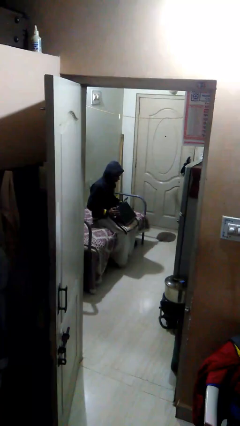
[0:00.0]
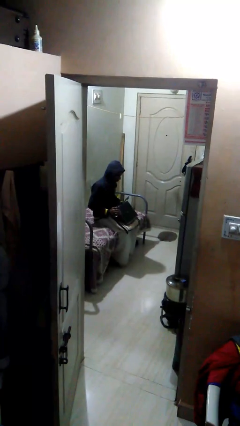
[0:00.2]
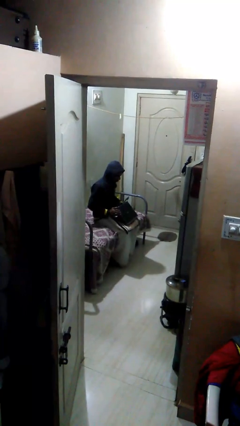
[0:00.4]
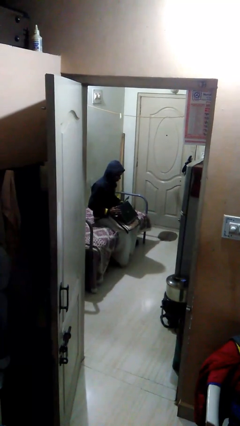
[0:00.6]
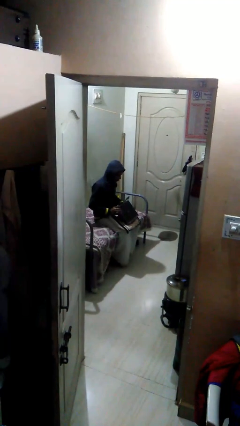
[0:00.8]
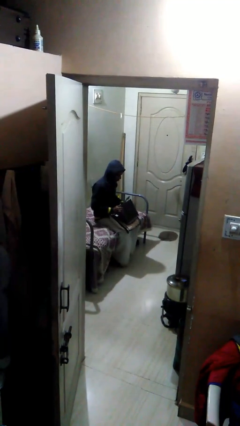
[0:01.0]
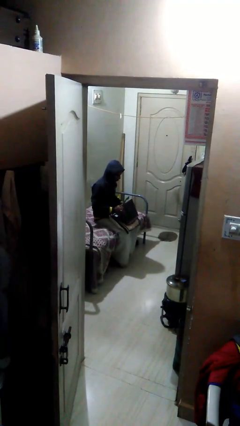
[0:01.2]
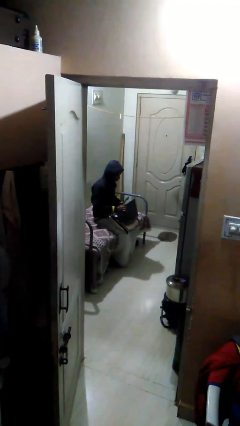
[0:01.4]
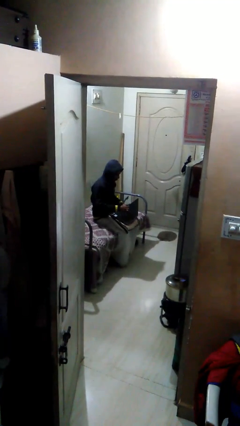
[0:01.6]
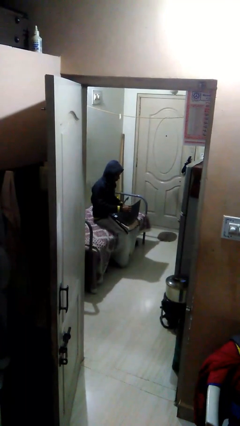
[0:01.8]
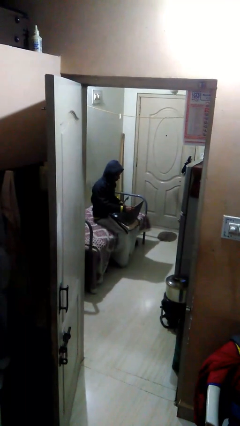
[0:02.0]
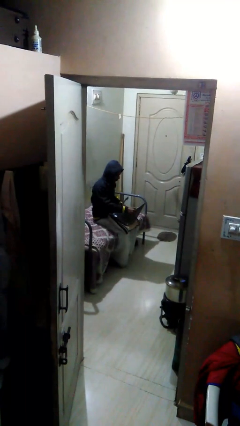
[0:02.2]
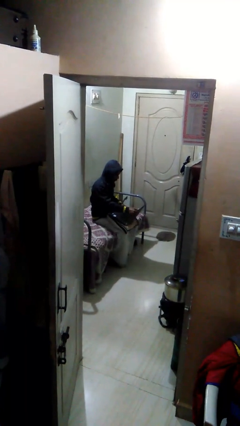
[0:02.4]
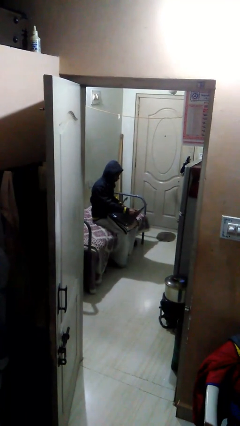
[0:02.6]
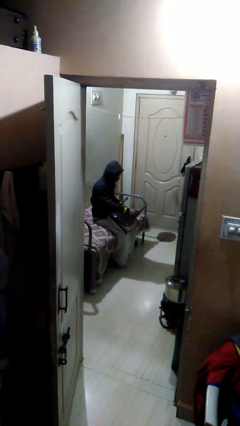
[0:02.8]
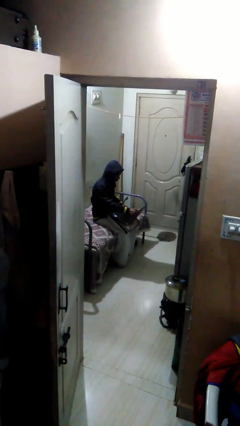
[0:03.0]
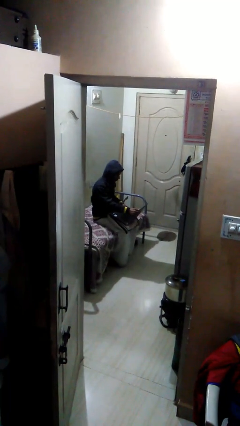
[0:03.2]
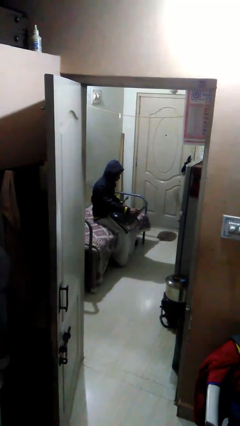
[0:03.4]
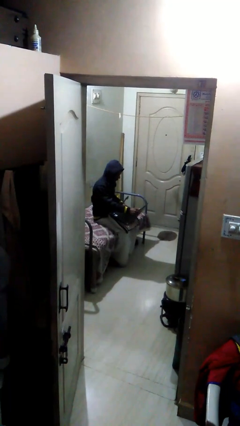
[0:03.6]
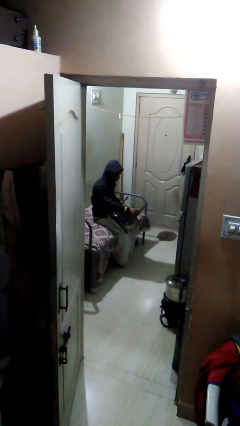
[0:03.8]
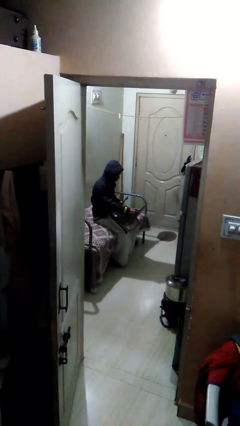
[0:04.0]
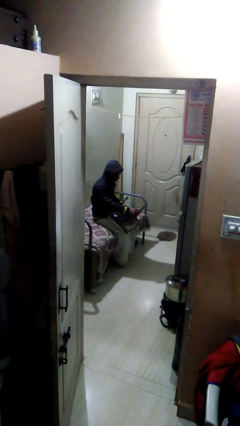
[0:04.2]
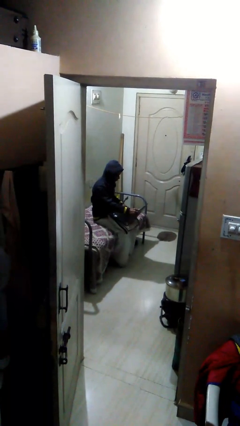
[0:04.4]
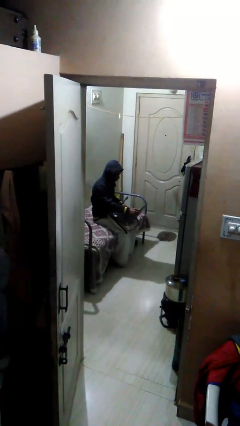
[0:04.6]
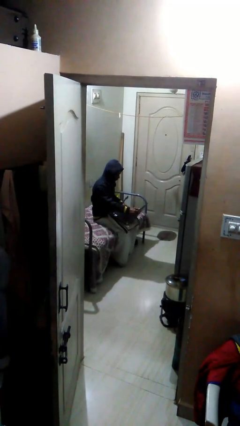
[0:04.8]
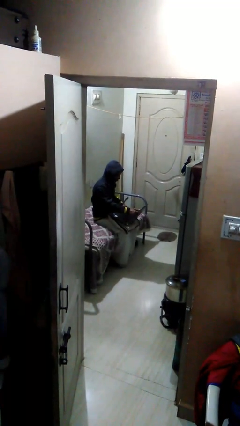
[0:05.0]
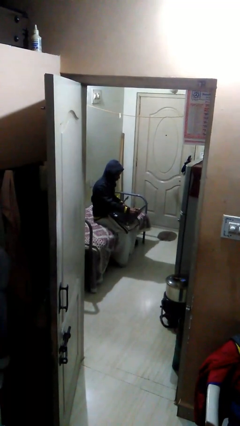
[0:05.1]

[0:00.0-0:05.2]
person interacts with laptop

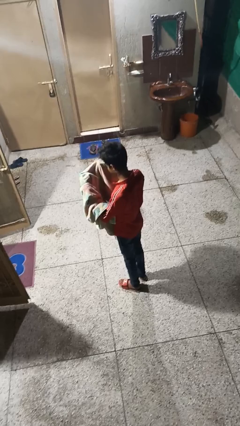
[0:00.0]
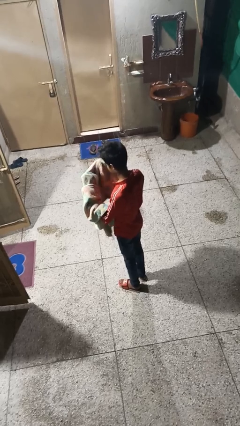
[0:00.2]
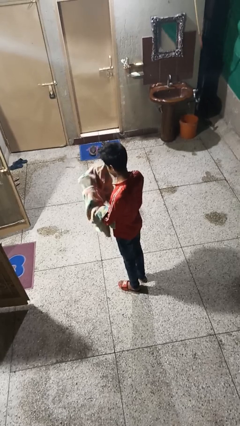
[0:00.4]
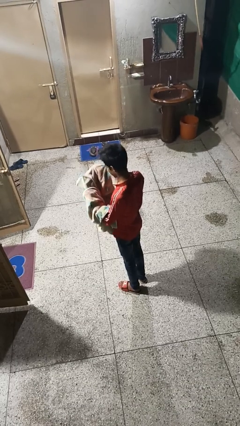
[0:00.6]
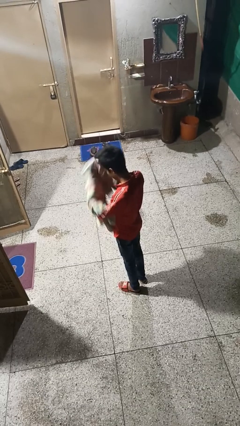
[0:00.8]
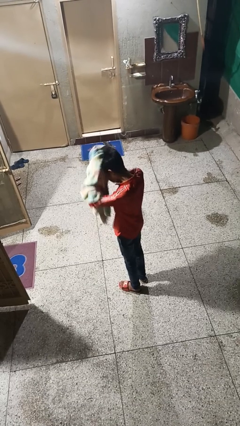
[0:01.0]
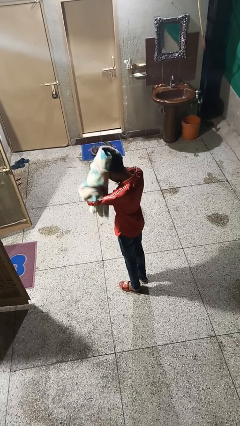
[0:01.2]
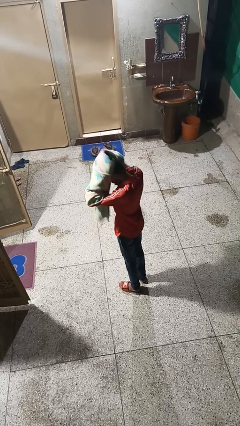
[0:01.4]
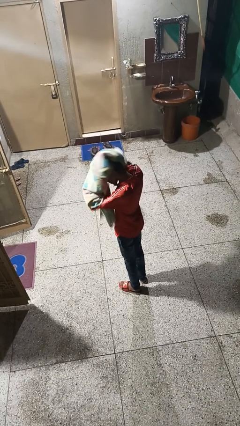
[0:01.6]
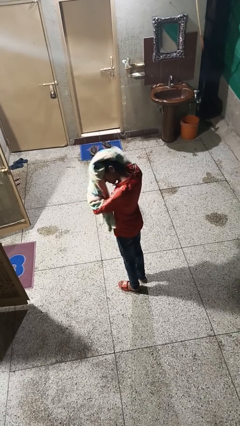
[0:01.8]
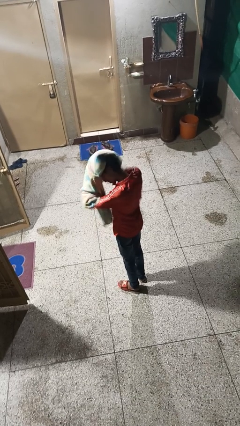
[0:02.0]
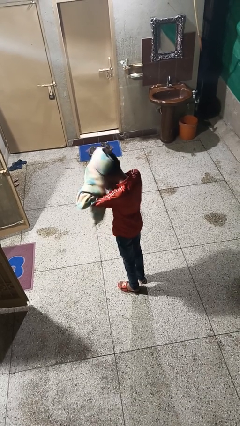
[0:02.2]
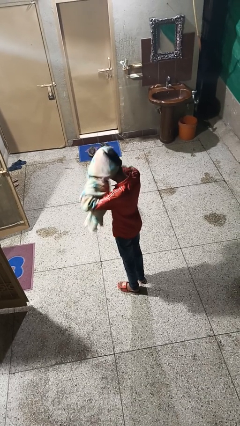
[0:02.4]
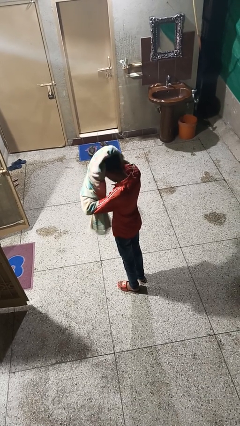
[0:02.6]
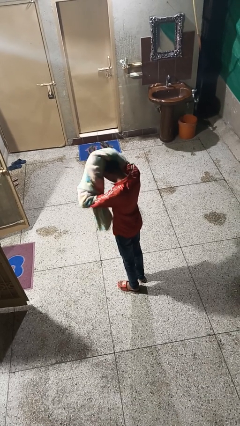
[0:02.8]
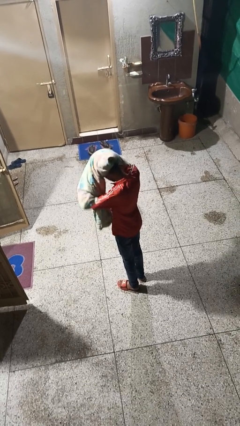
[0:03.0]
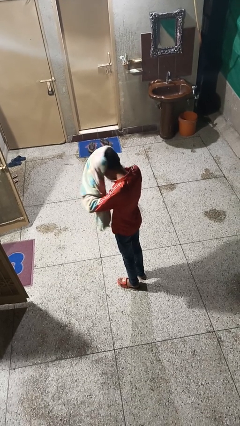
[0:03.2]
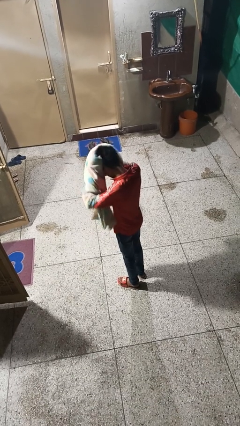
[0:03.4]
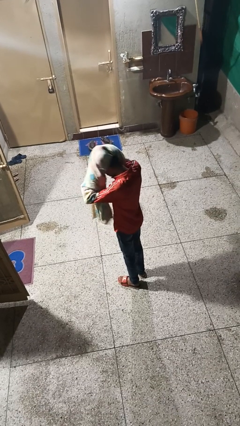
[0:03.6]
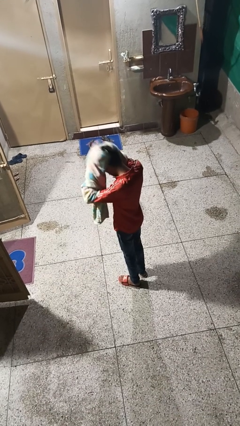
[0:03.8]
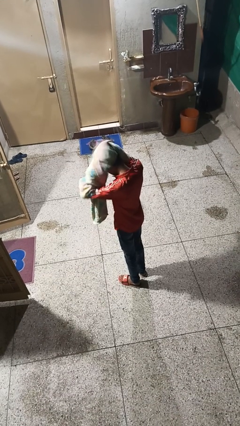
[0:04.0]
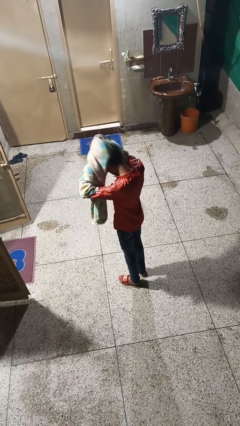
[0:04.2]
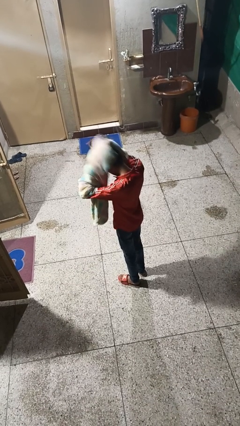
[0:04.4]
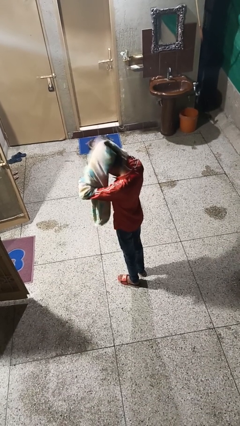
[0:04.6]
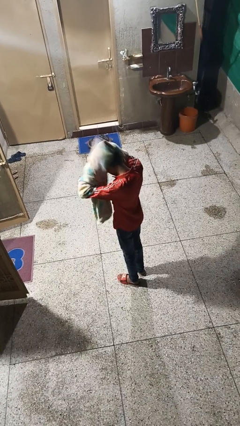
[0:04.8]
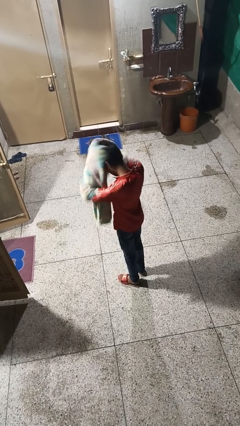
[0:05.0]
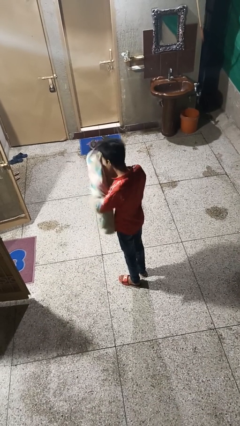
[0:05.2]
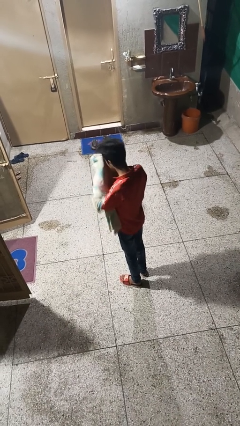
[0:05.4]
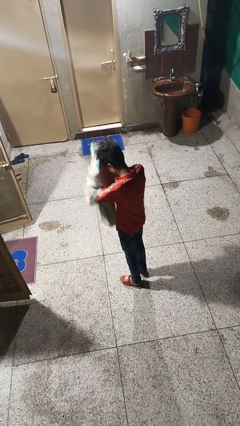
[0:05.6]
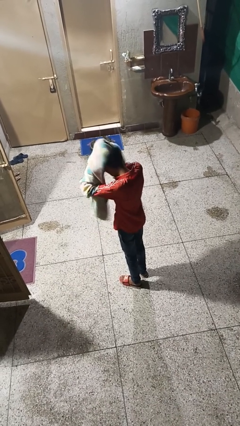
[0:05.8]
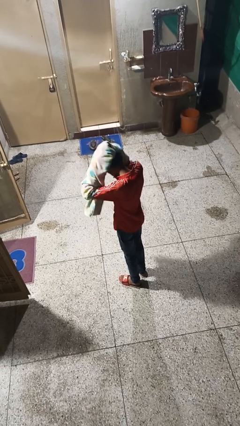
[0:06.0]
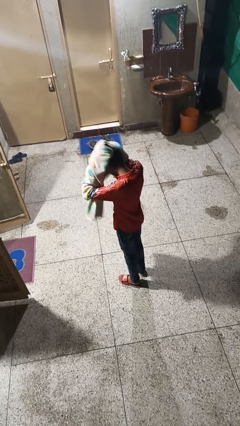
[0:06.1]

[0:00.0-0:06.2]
person dries hair with towel

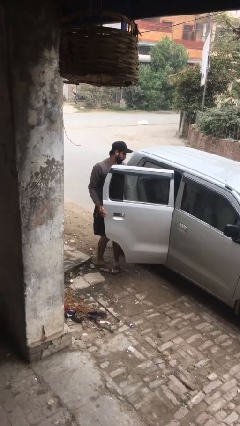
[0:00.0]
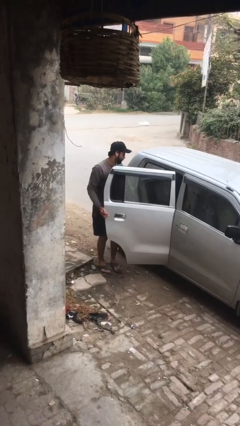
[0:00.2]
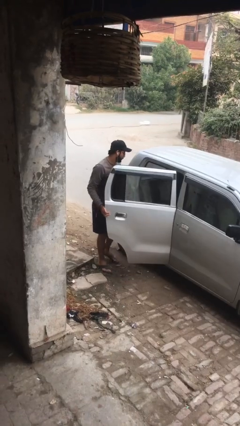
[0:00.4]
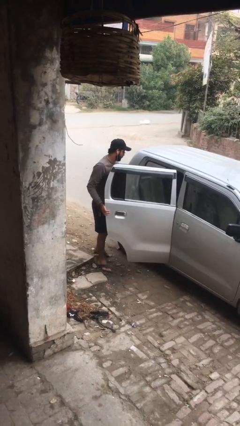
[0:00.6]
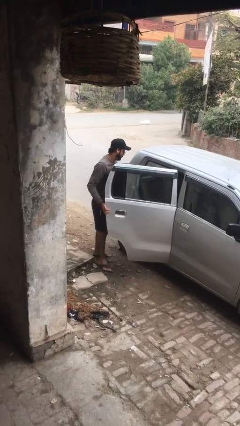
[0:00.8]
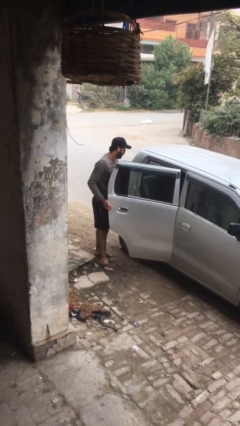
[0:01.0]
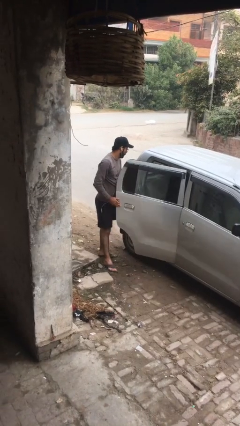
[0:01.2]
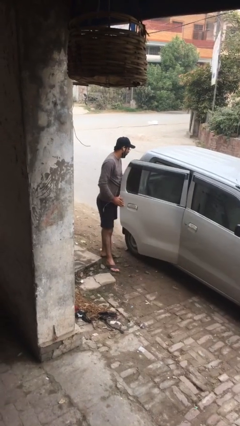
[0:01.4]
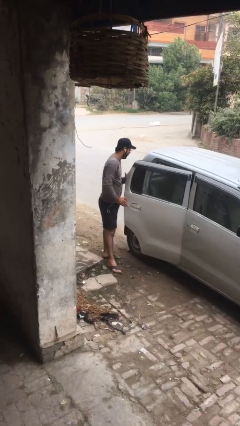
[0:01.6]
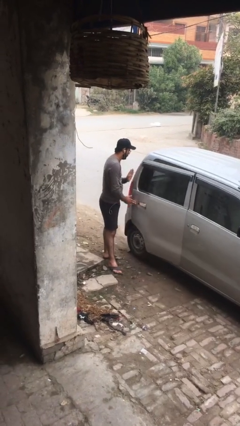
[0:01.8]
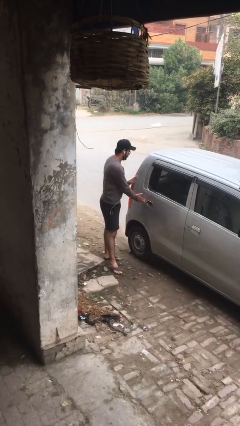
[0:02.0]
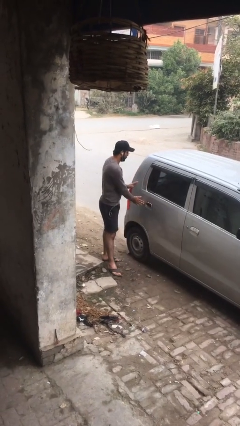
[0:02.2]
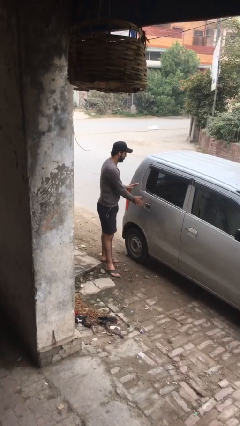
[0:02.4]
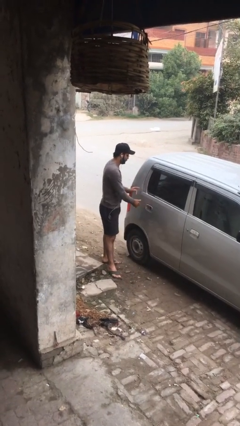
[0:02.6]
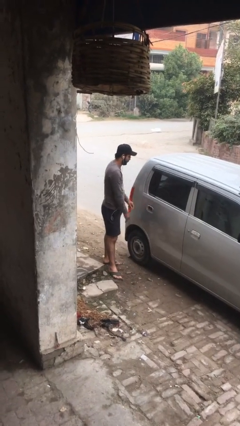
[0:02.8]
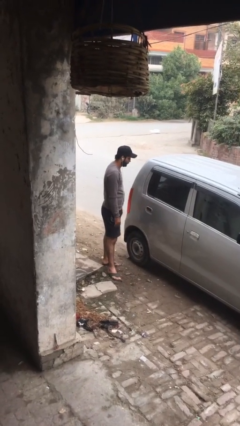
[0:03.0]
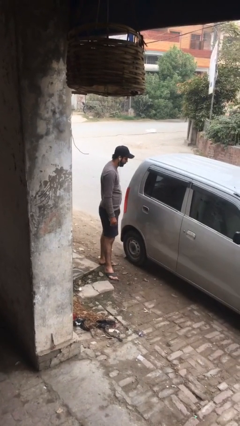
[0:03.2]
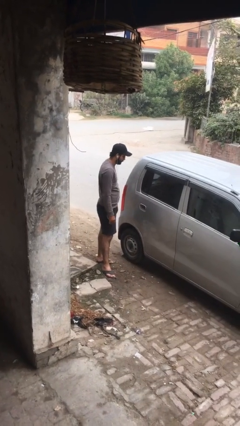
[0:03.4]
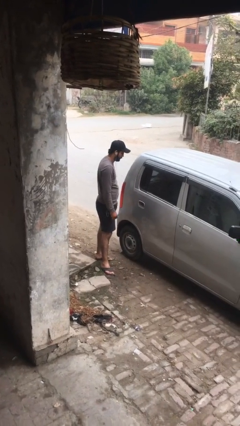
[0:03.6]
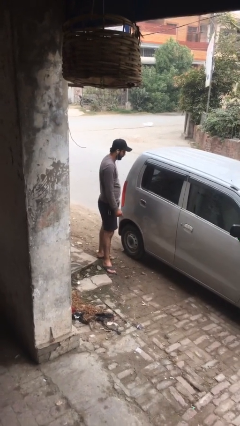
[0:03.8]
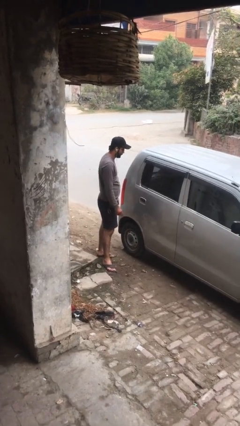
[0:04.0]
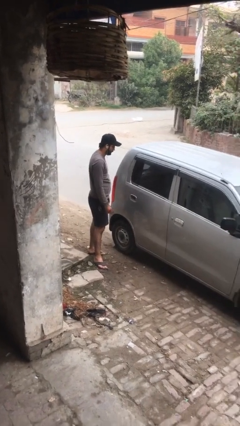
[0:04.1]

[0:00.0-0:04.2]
person closes car door

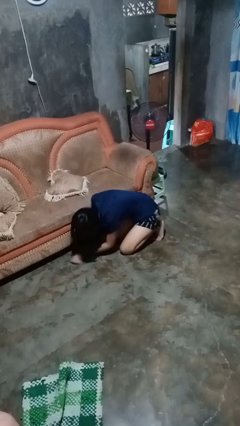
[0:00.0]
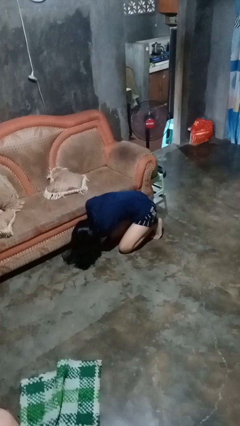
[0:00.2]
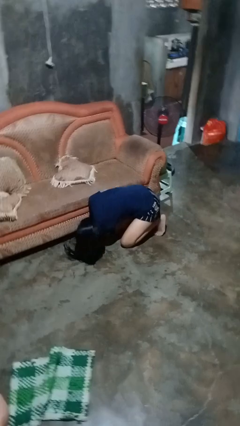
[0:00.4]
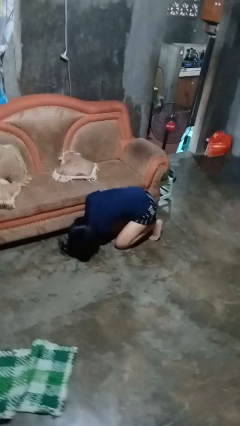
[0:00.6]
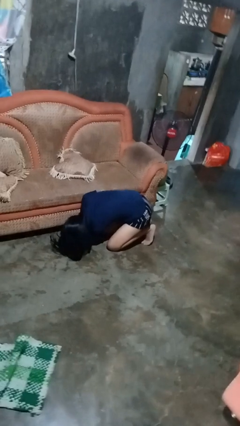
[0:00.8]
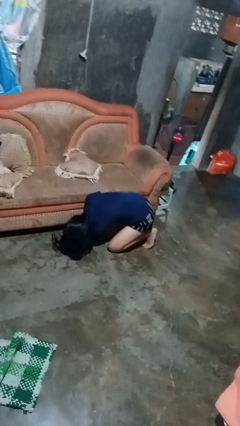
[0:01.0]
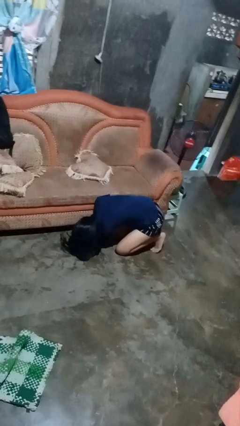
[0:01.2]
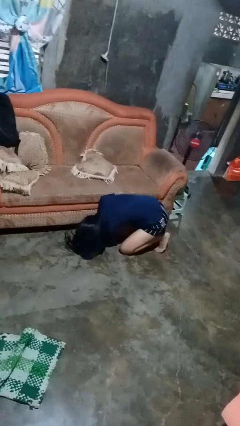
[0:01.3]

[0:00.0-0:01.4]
person searches under couch

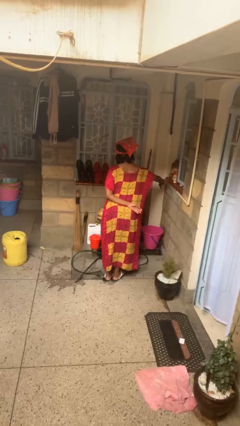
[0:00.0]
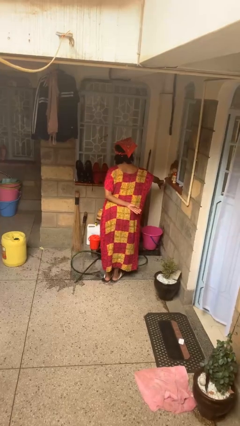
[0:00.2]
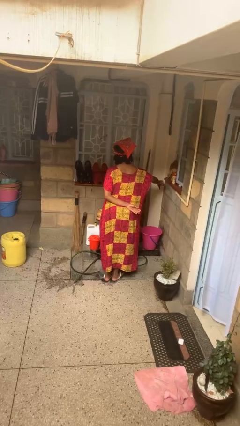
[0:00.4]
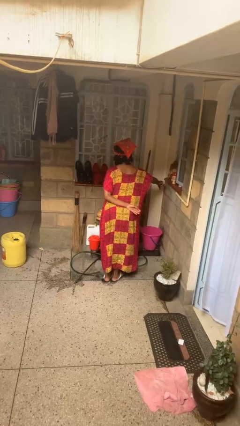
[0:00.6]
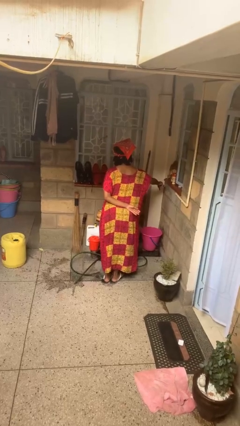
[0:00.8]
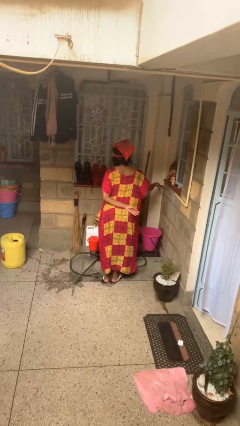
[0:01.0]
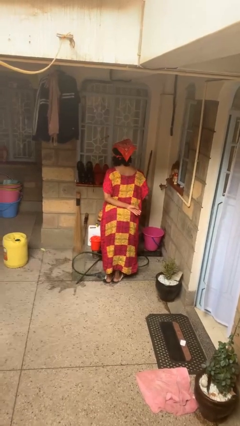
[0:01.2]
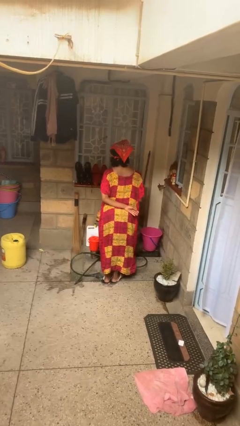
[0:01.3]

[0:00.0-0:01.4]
person turns off faucet
